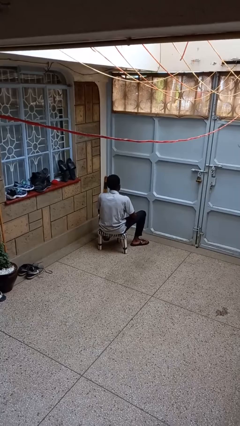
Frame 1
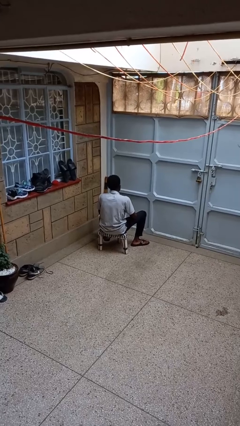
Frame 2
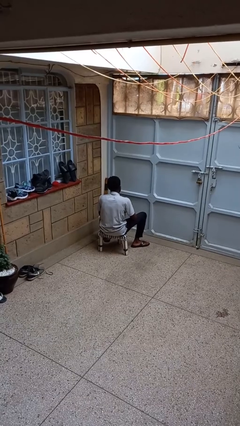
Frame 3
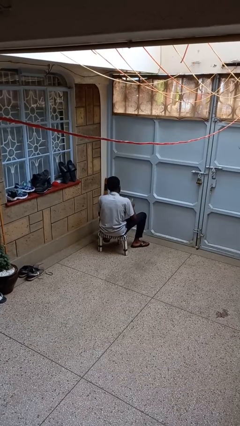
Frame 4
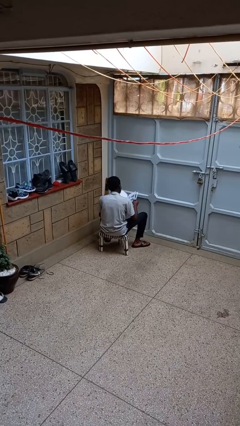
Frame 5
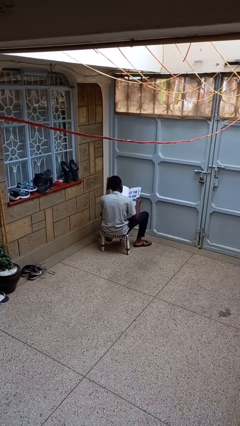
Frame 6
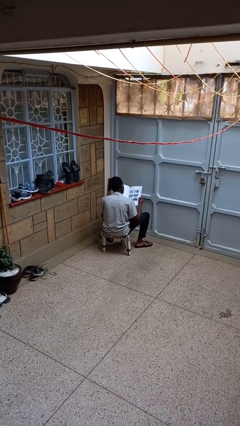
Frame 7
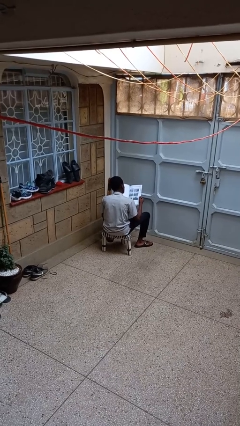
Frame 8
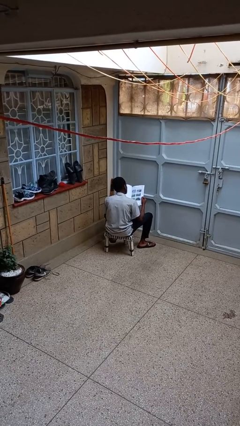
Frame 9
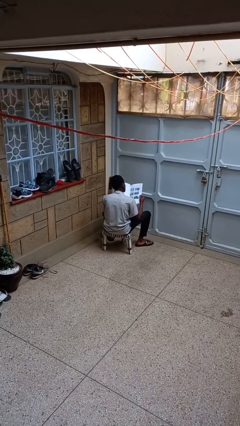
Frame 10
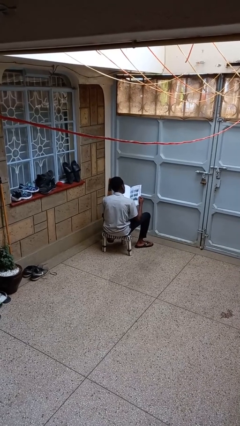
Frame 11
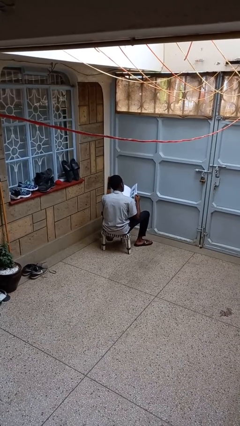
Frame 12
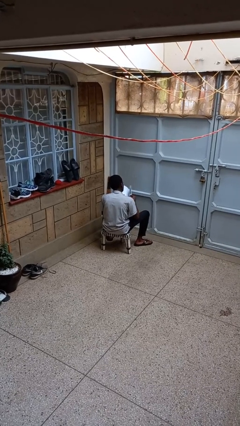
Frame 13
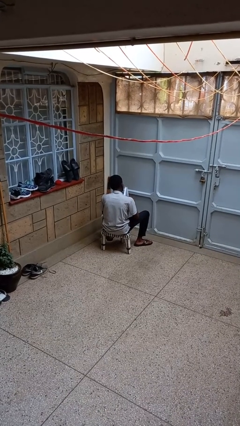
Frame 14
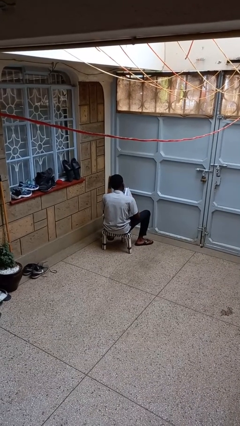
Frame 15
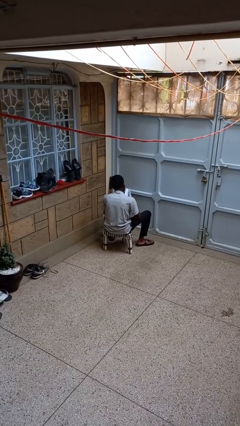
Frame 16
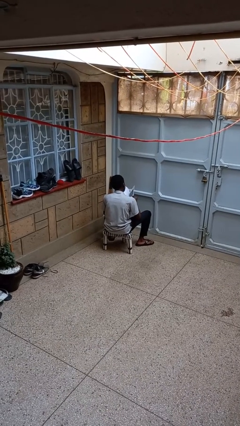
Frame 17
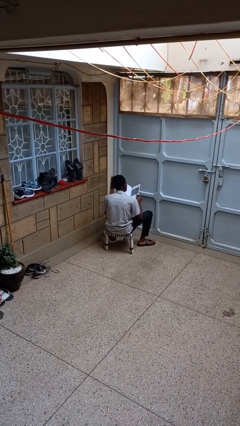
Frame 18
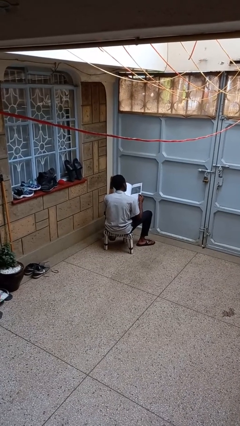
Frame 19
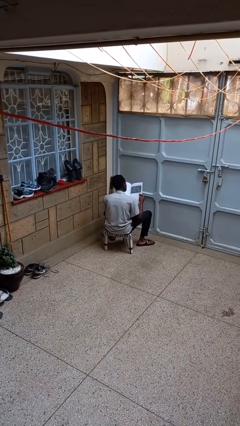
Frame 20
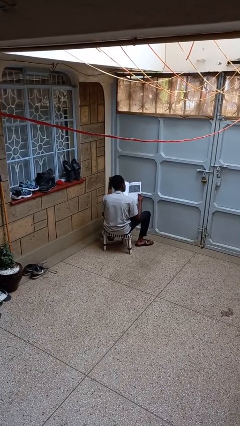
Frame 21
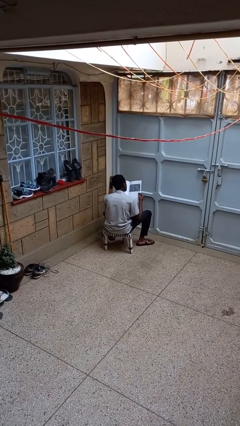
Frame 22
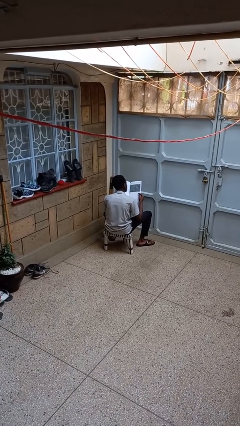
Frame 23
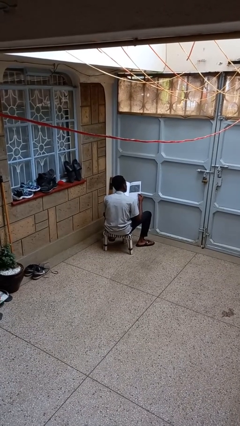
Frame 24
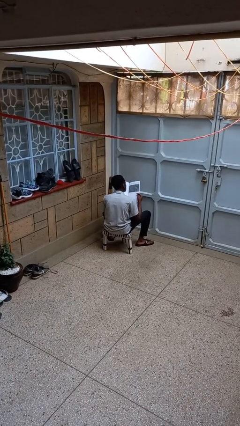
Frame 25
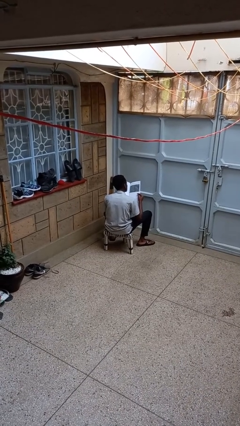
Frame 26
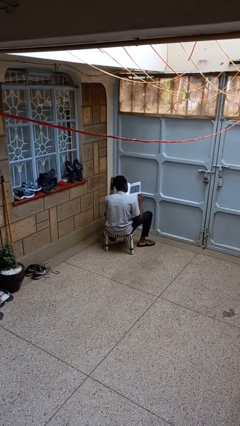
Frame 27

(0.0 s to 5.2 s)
person reads magazine

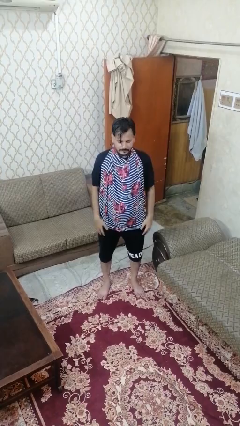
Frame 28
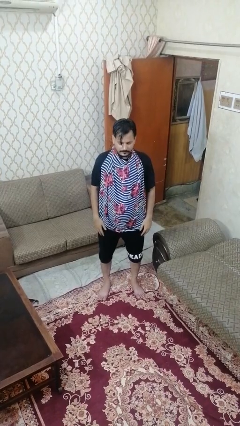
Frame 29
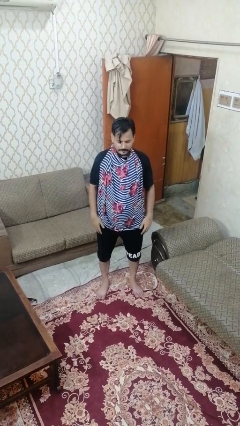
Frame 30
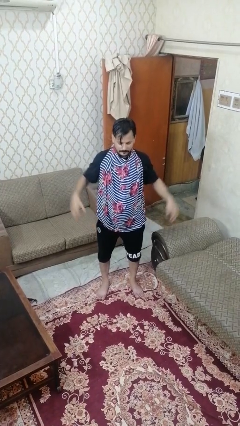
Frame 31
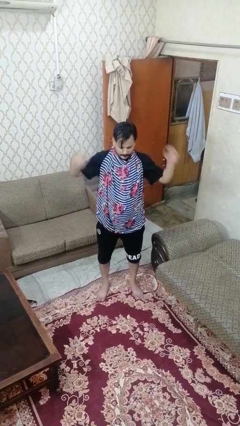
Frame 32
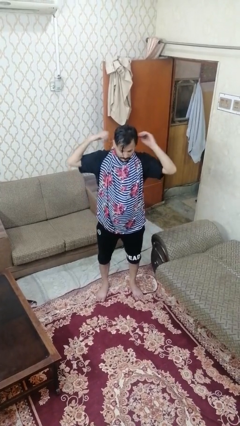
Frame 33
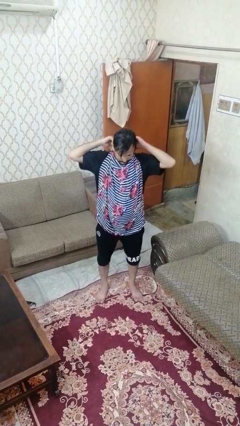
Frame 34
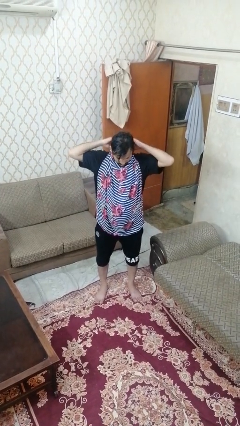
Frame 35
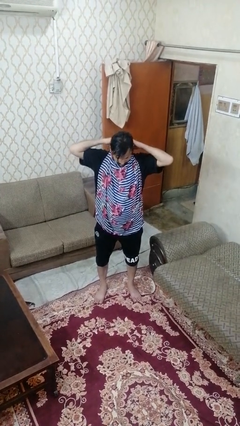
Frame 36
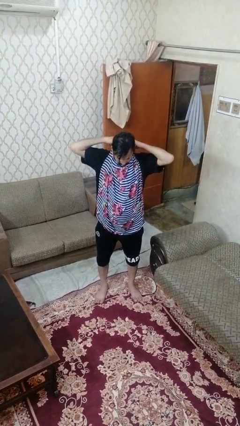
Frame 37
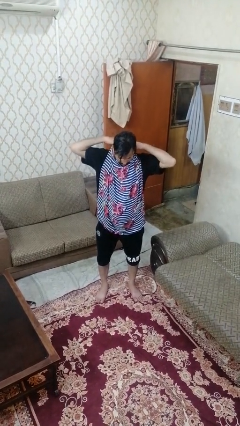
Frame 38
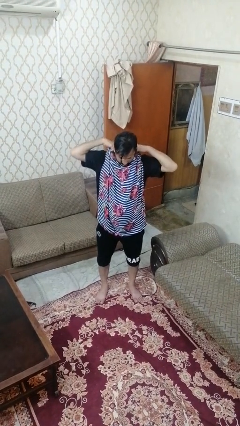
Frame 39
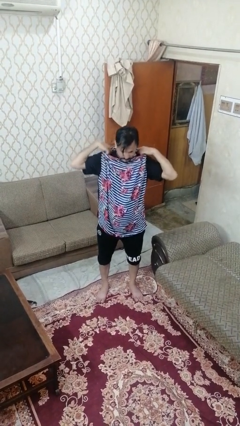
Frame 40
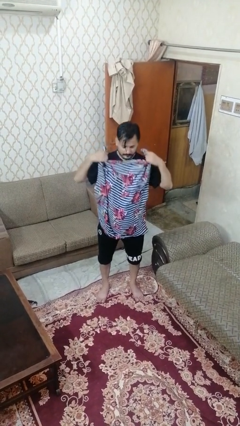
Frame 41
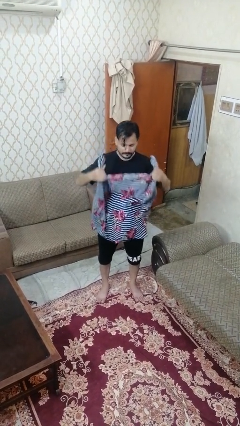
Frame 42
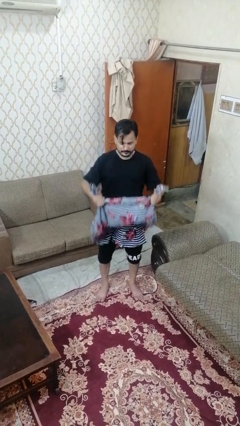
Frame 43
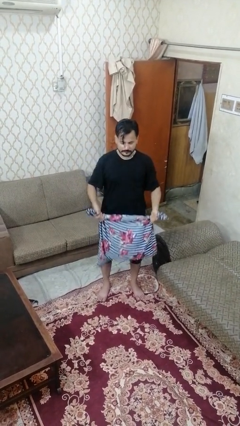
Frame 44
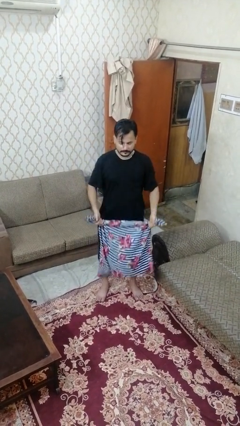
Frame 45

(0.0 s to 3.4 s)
person takes off apron

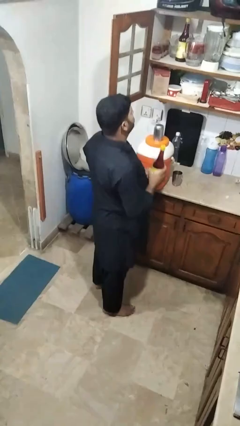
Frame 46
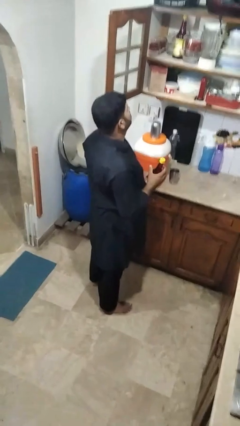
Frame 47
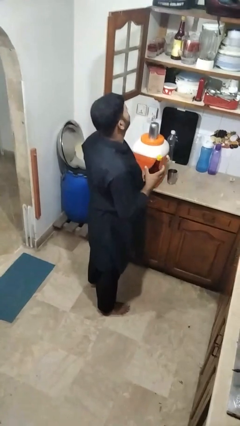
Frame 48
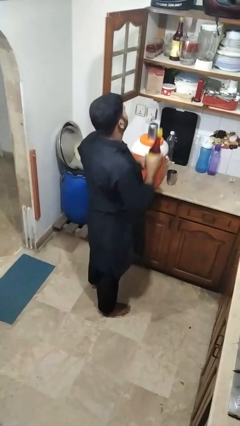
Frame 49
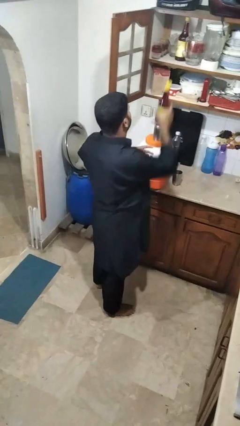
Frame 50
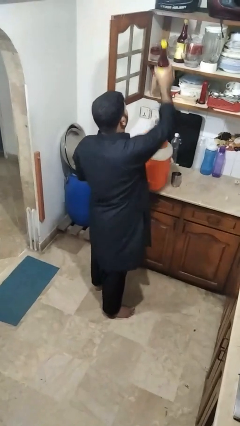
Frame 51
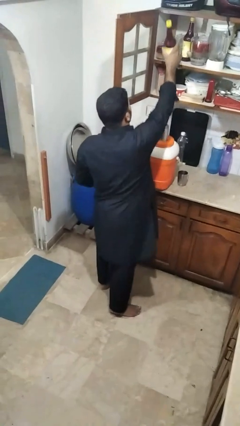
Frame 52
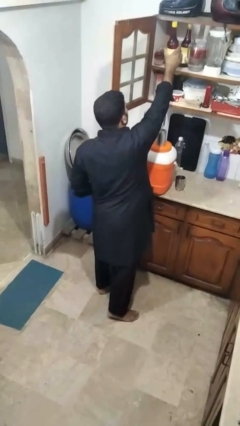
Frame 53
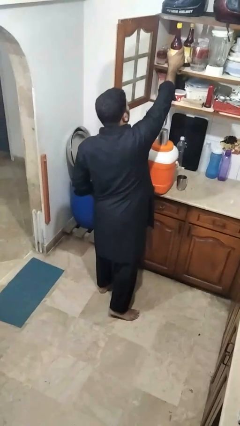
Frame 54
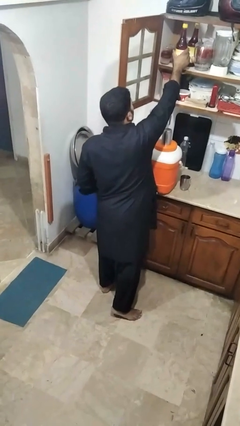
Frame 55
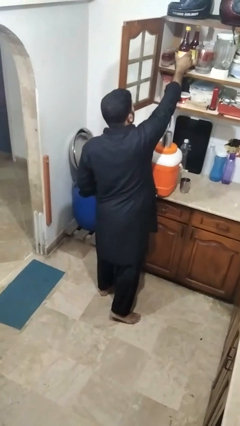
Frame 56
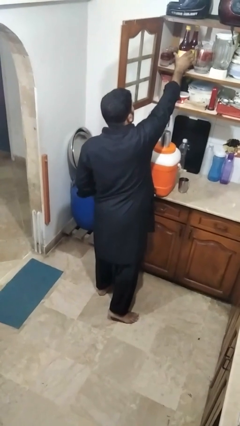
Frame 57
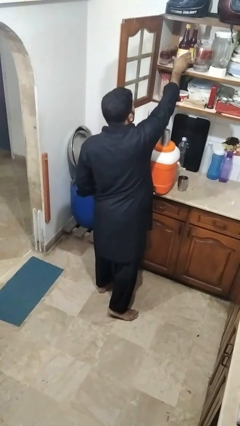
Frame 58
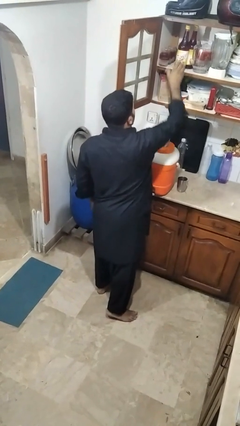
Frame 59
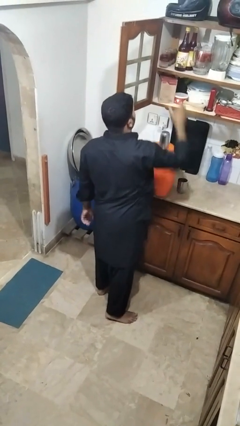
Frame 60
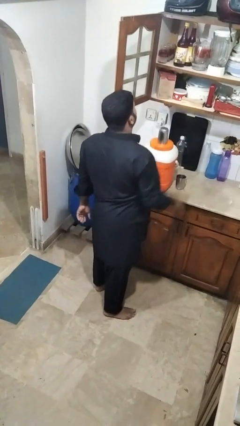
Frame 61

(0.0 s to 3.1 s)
person puts down object into cabinet

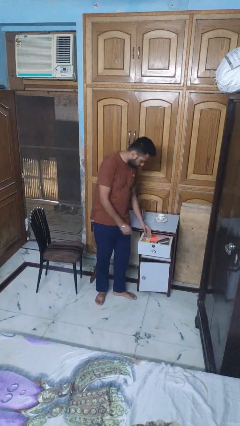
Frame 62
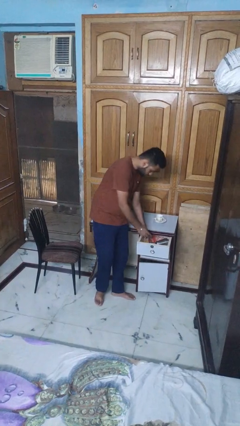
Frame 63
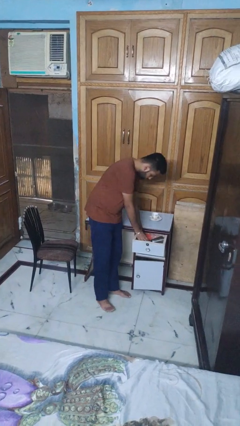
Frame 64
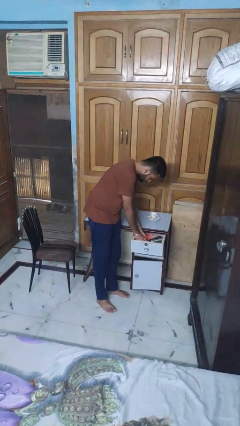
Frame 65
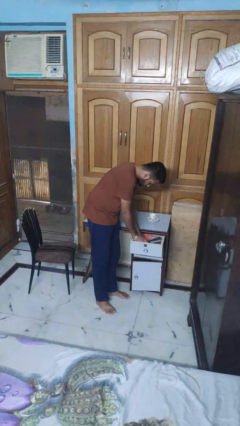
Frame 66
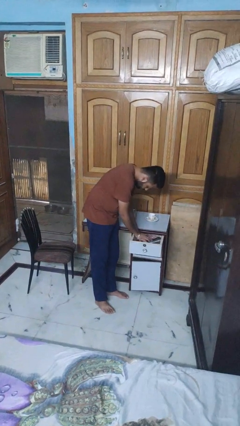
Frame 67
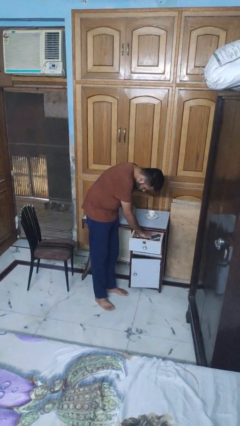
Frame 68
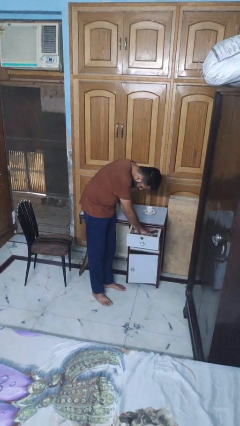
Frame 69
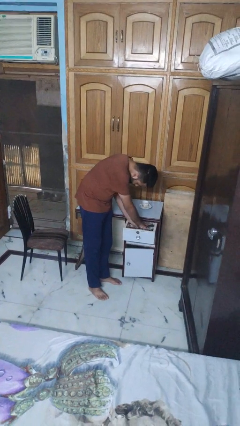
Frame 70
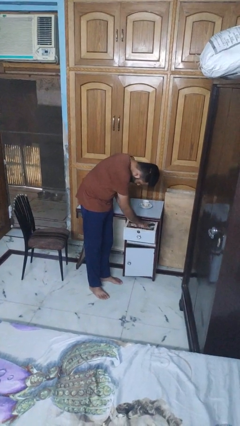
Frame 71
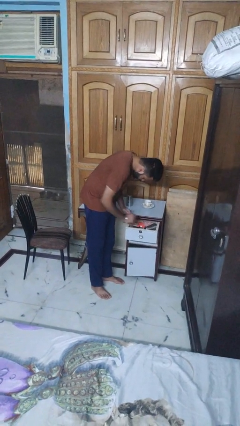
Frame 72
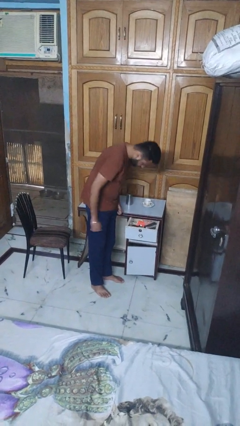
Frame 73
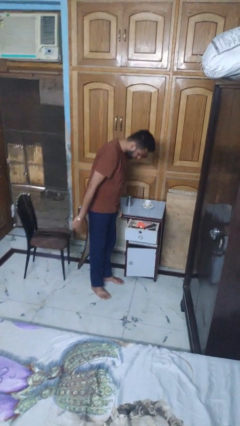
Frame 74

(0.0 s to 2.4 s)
person searches in kitchen drawer

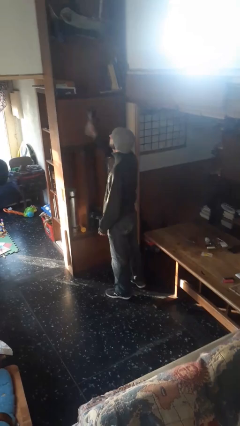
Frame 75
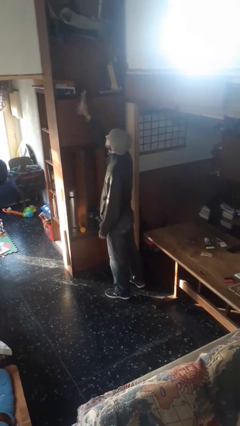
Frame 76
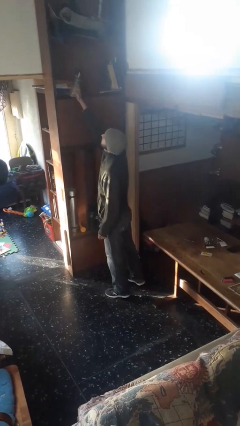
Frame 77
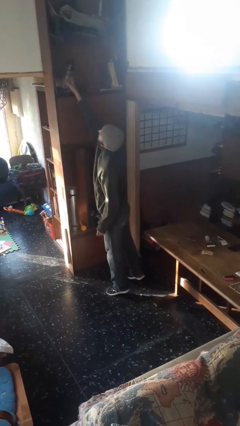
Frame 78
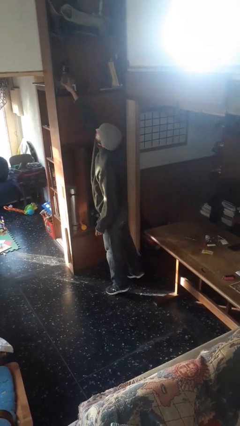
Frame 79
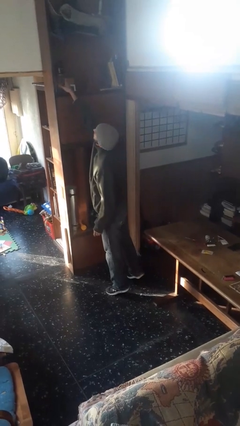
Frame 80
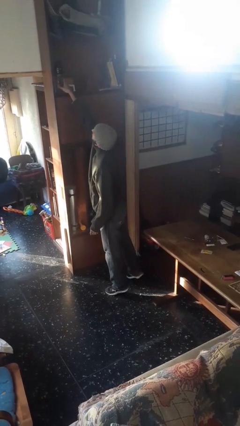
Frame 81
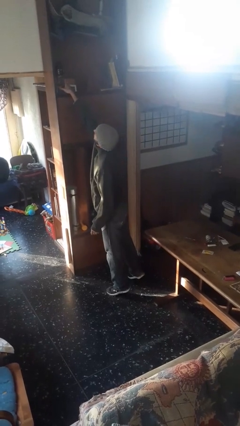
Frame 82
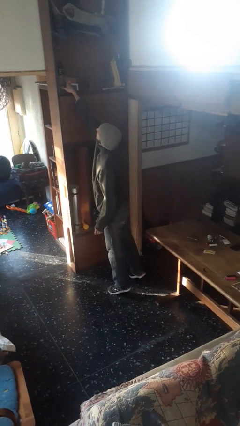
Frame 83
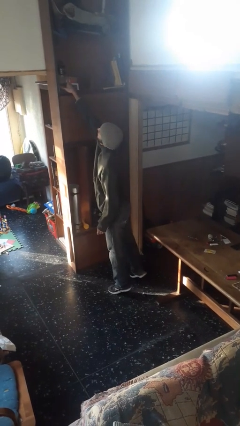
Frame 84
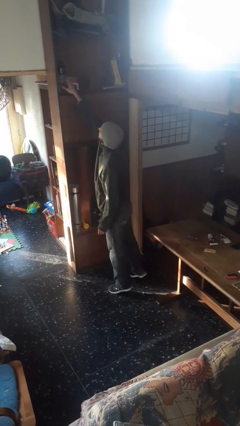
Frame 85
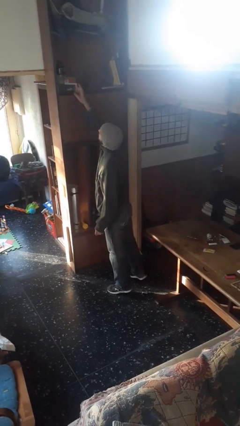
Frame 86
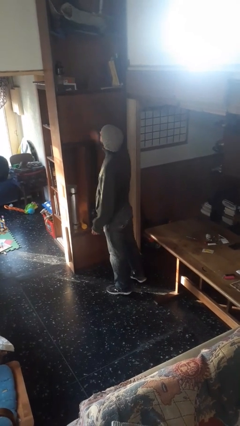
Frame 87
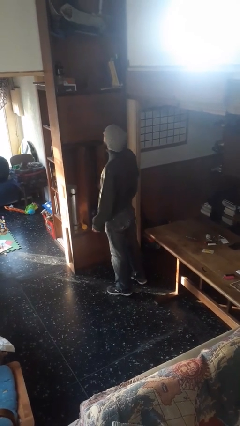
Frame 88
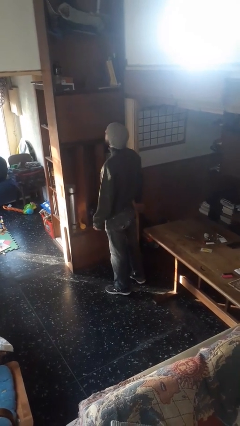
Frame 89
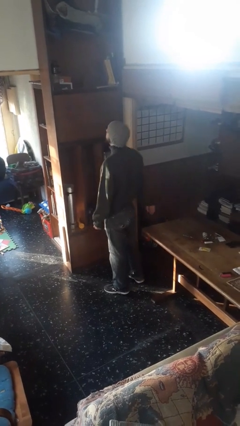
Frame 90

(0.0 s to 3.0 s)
person picks up object from shelf

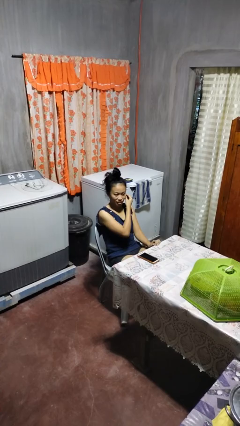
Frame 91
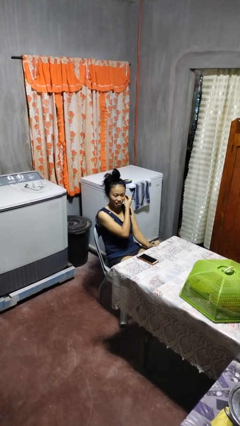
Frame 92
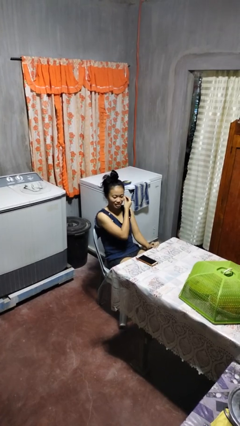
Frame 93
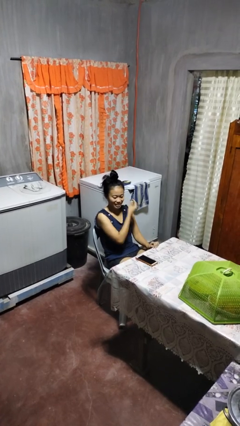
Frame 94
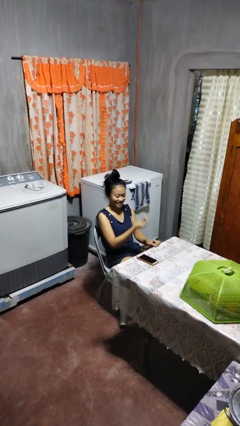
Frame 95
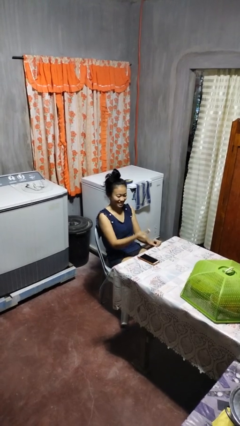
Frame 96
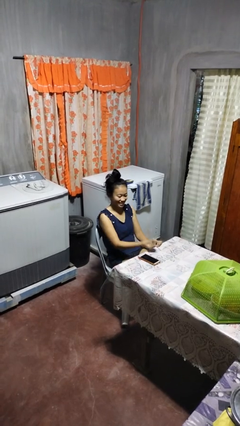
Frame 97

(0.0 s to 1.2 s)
person takes off earrings
